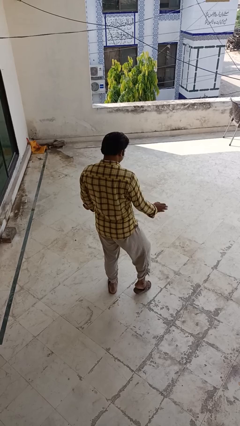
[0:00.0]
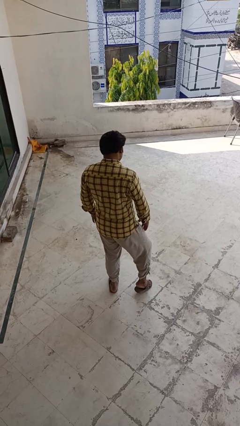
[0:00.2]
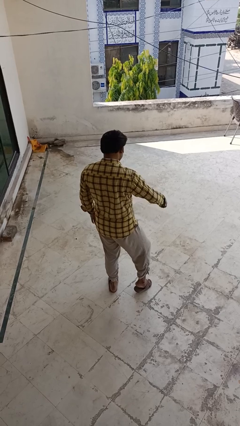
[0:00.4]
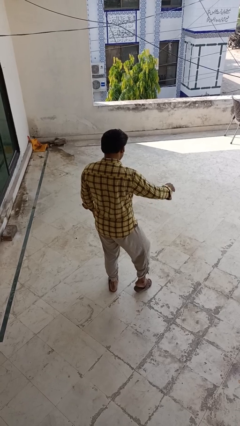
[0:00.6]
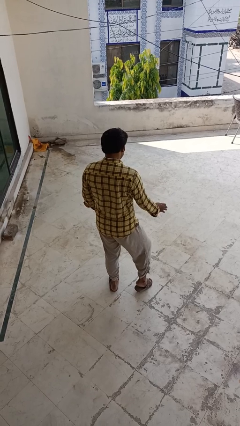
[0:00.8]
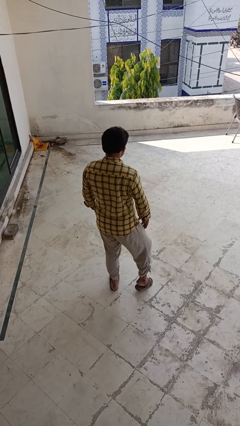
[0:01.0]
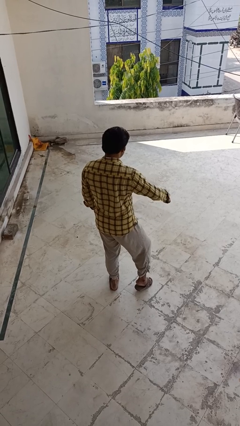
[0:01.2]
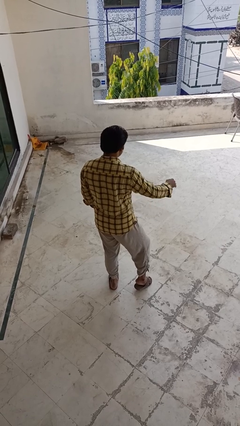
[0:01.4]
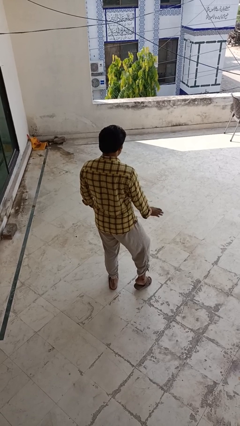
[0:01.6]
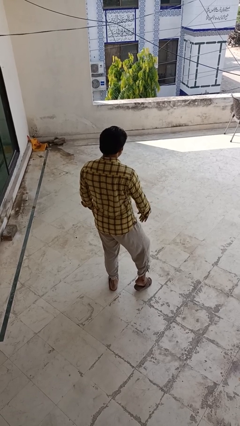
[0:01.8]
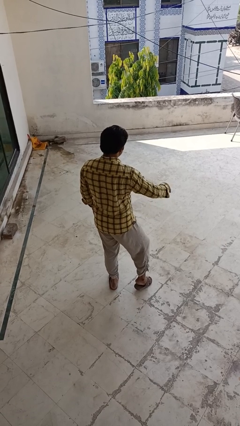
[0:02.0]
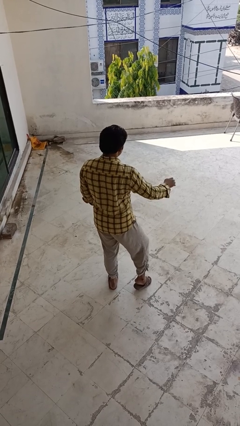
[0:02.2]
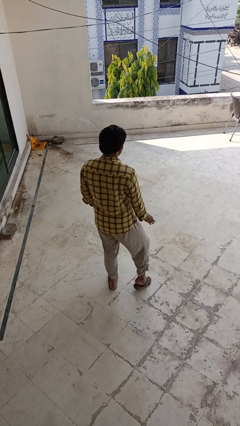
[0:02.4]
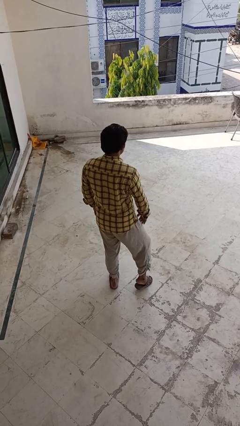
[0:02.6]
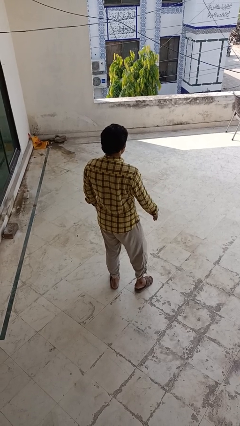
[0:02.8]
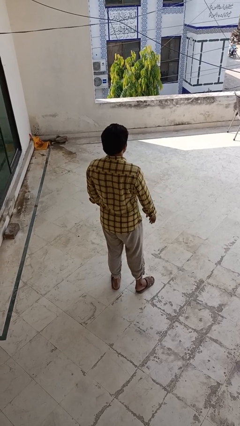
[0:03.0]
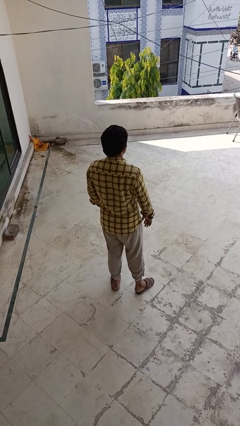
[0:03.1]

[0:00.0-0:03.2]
person slaps hands on thighs

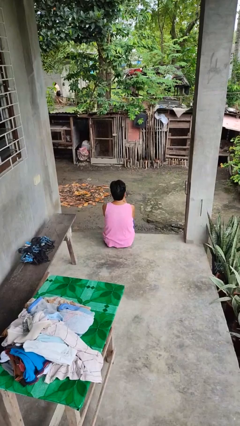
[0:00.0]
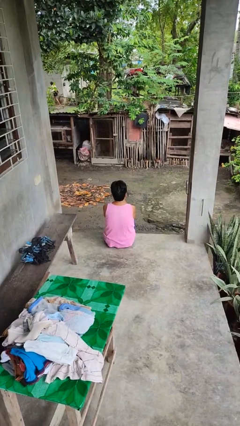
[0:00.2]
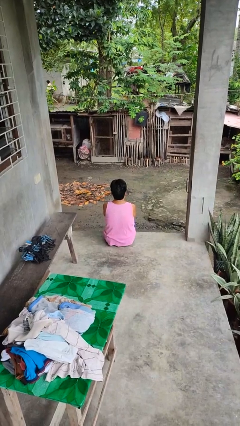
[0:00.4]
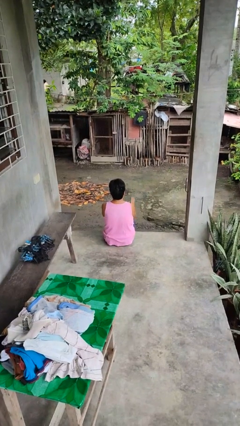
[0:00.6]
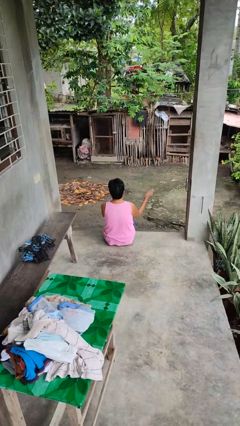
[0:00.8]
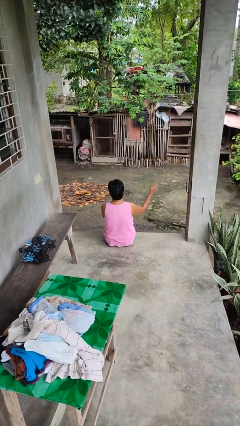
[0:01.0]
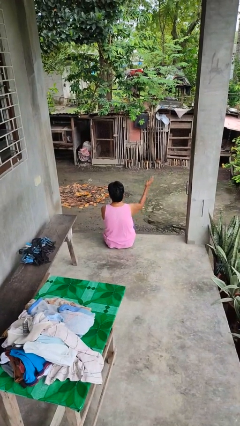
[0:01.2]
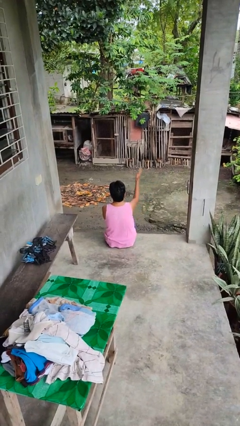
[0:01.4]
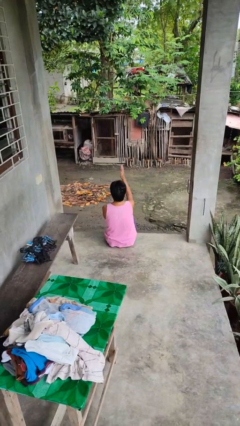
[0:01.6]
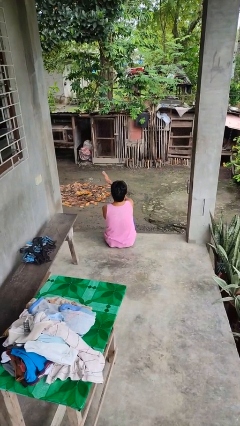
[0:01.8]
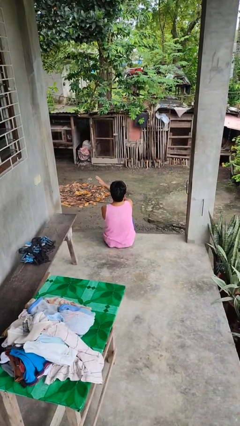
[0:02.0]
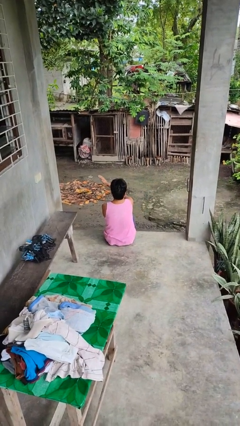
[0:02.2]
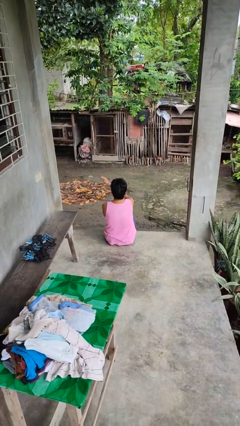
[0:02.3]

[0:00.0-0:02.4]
person gestures swipe left

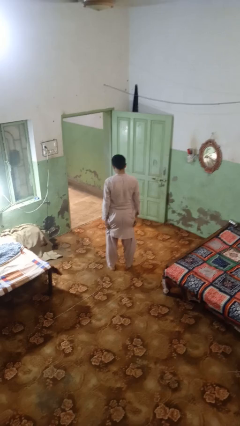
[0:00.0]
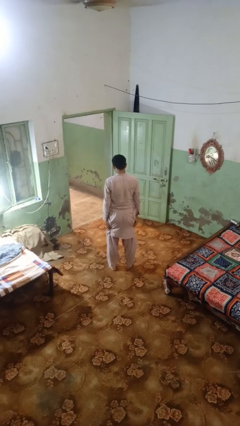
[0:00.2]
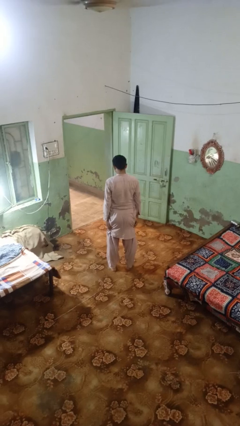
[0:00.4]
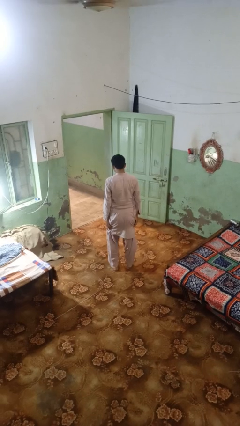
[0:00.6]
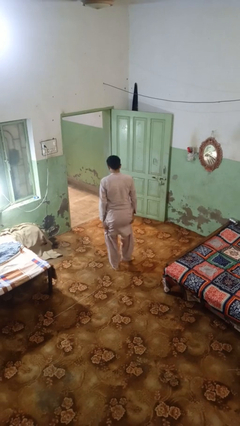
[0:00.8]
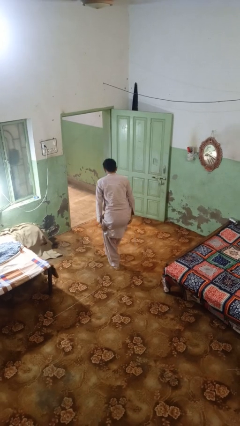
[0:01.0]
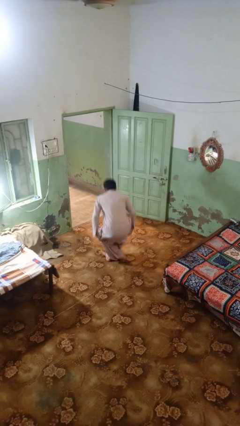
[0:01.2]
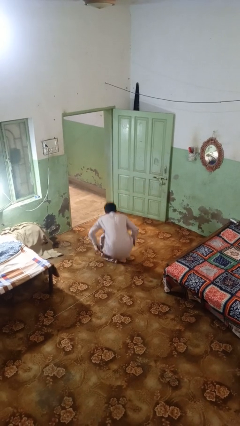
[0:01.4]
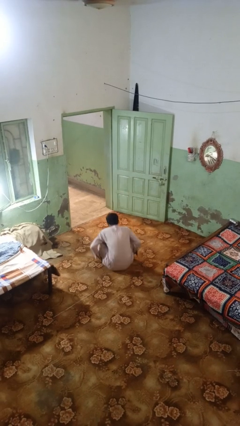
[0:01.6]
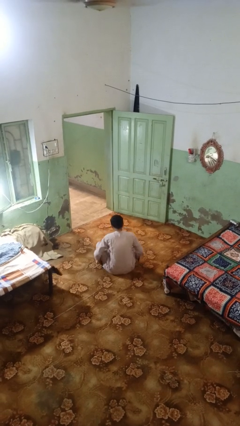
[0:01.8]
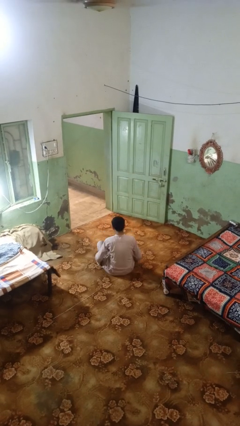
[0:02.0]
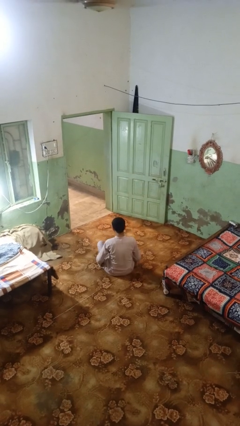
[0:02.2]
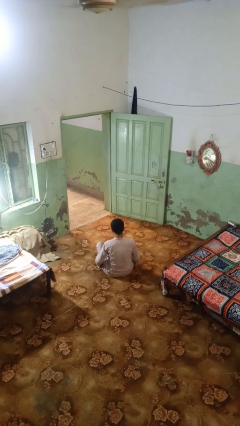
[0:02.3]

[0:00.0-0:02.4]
person sits crisscross

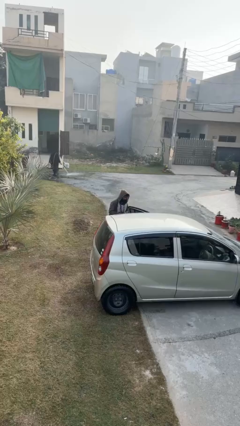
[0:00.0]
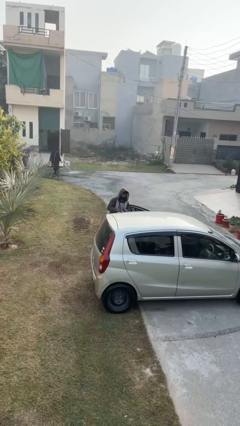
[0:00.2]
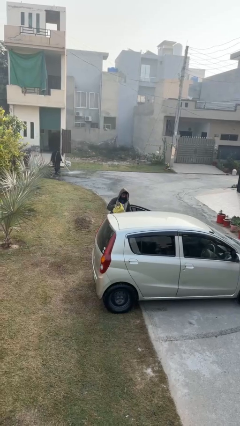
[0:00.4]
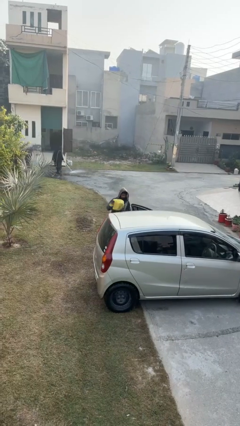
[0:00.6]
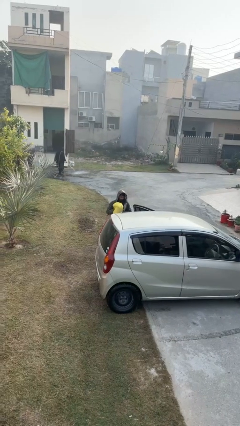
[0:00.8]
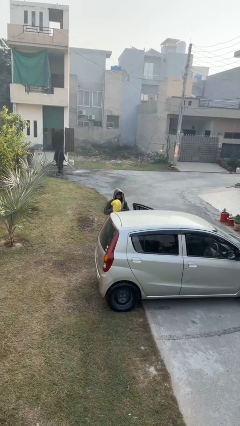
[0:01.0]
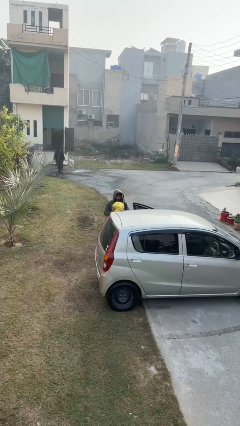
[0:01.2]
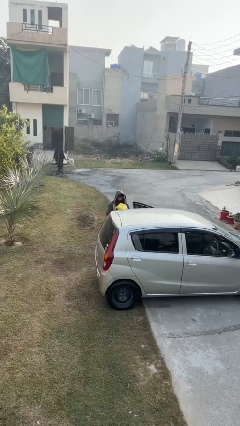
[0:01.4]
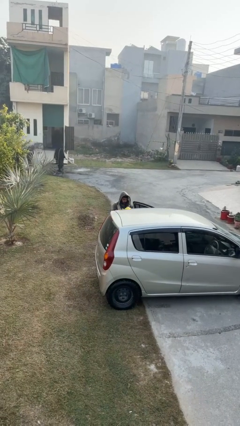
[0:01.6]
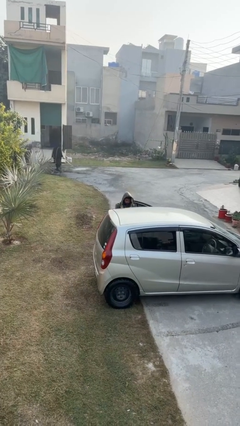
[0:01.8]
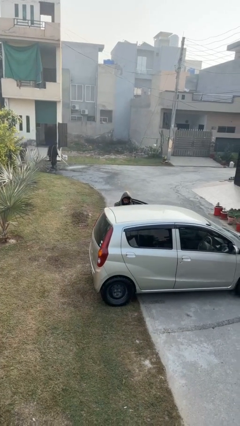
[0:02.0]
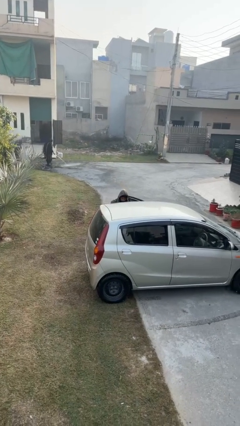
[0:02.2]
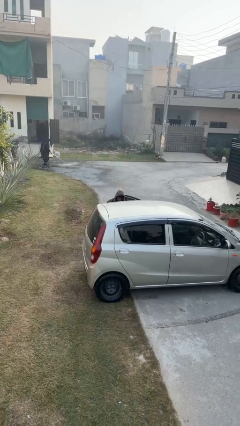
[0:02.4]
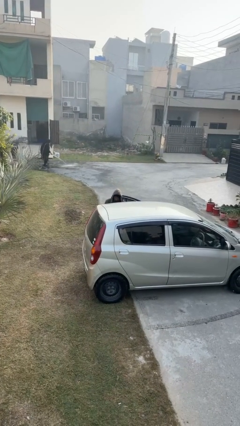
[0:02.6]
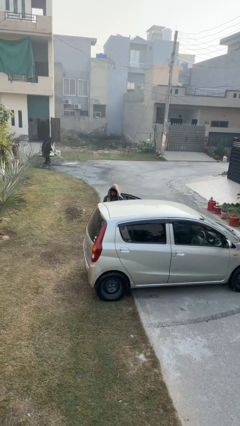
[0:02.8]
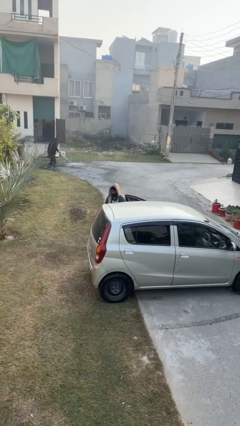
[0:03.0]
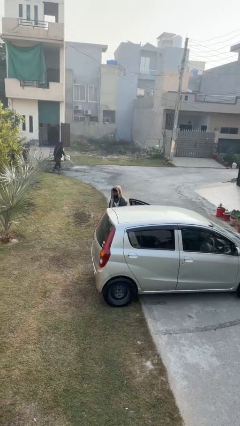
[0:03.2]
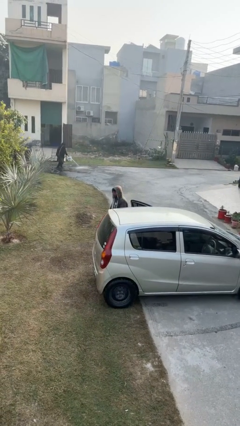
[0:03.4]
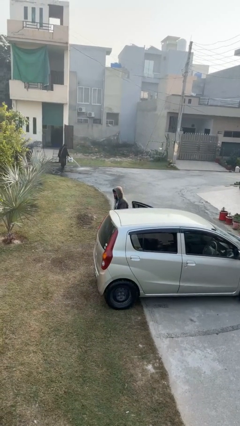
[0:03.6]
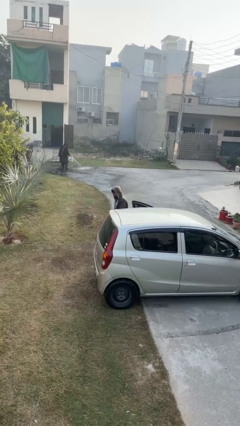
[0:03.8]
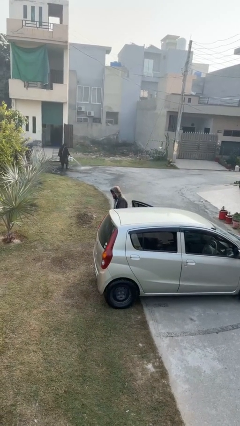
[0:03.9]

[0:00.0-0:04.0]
person loads car

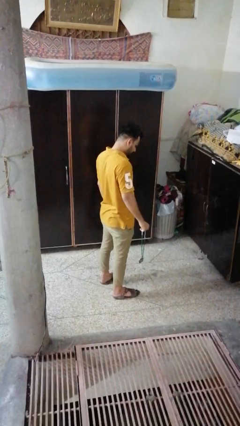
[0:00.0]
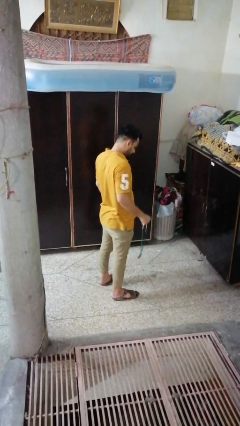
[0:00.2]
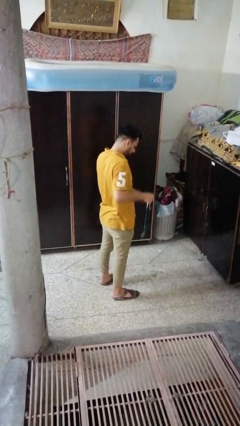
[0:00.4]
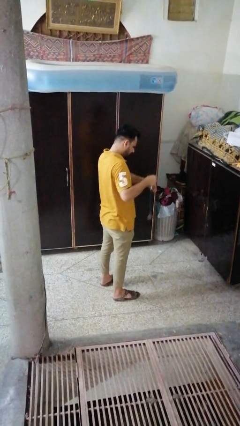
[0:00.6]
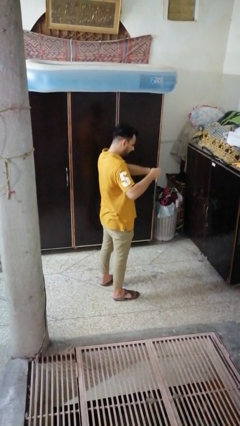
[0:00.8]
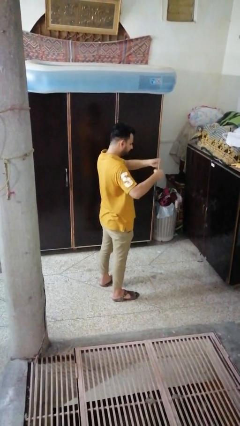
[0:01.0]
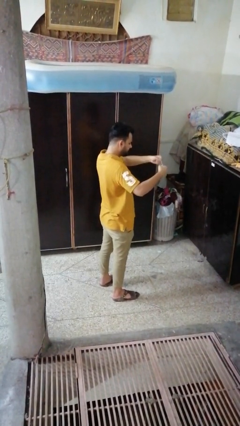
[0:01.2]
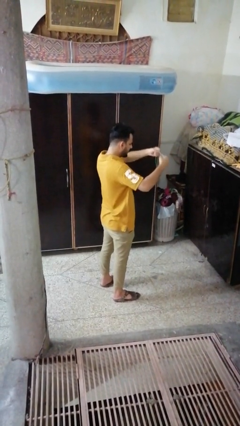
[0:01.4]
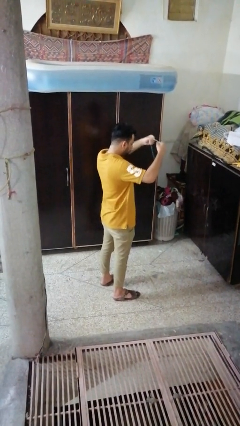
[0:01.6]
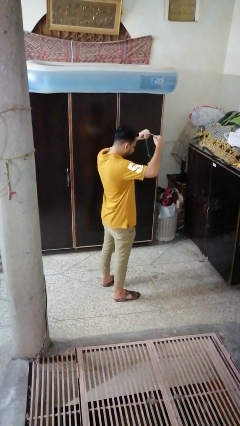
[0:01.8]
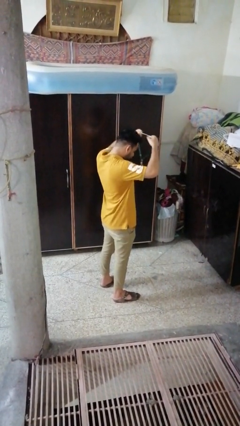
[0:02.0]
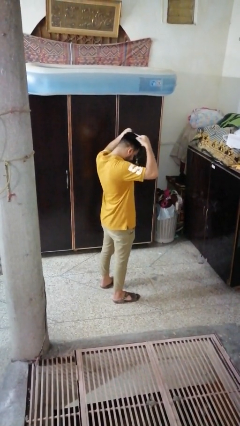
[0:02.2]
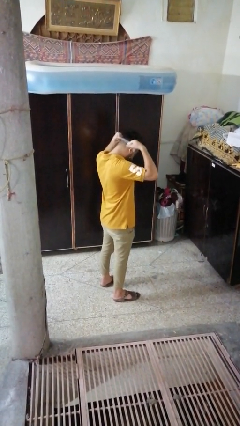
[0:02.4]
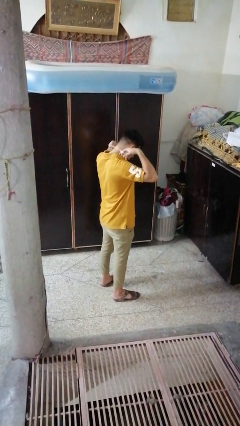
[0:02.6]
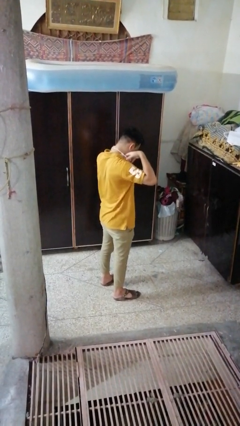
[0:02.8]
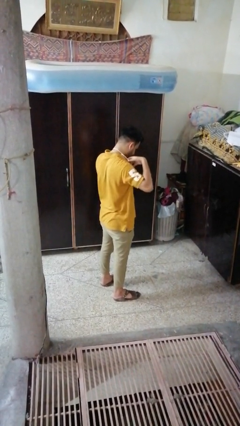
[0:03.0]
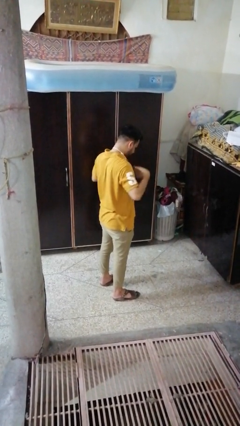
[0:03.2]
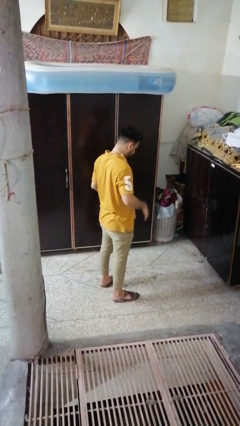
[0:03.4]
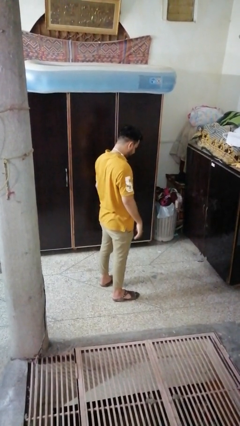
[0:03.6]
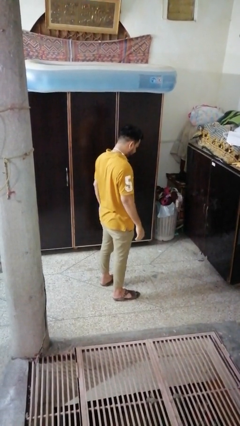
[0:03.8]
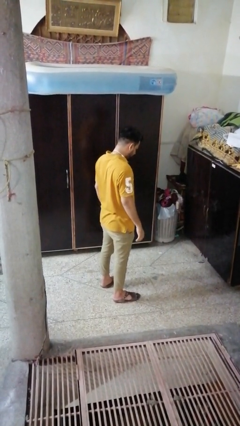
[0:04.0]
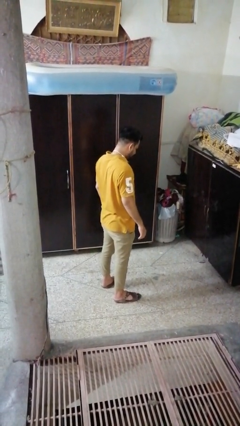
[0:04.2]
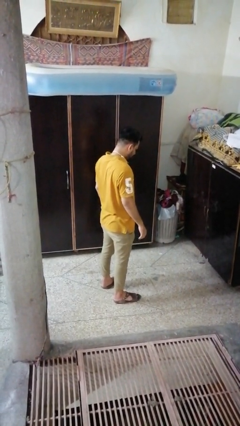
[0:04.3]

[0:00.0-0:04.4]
person puts on necklace

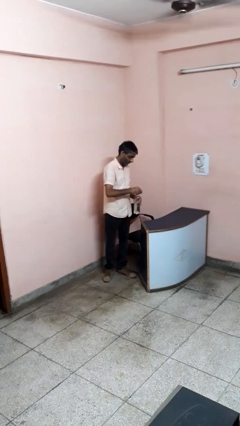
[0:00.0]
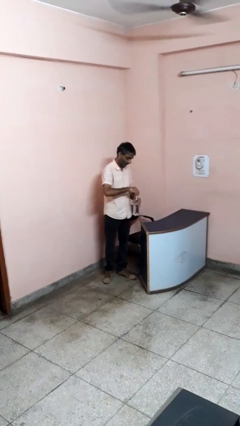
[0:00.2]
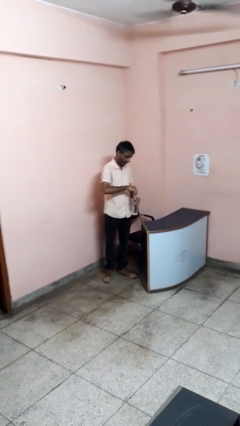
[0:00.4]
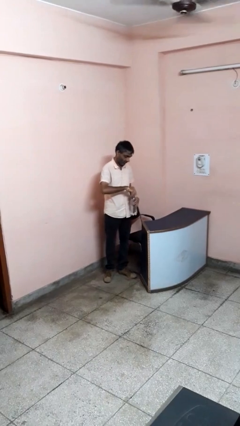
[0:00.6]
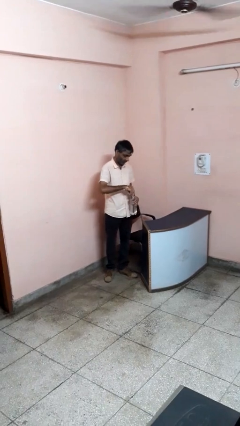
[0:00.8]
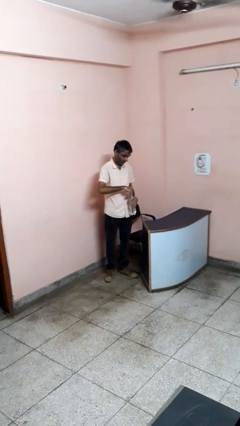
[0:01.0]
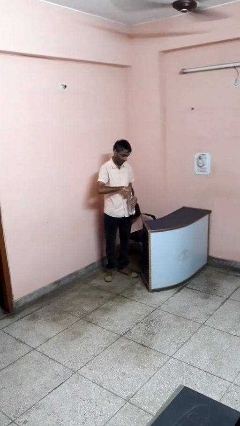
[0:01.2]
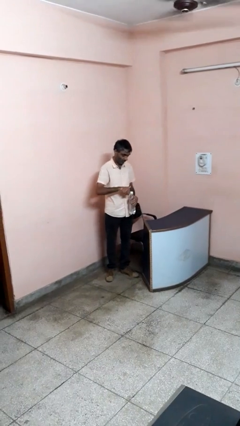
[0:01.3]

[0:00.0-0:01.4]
person screws lid to bottle
